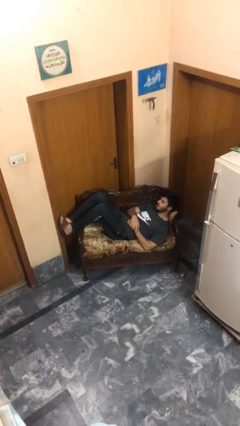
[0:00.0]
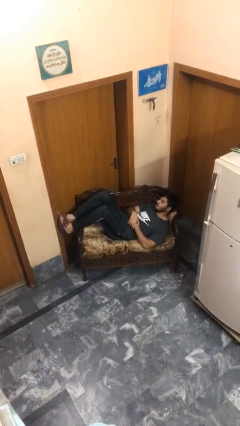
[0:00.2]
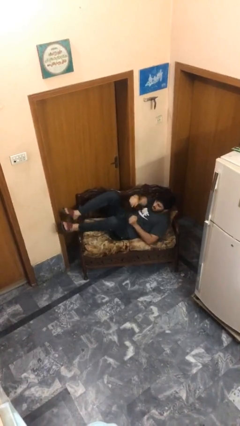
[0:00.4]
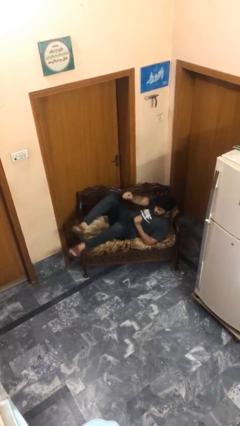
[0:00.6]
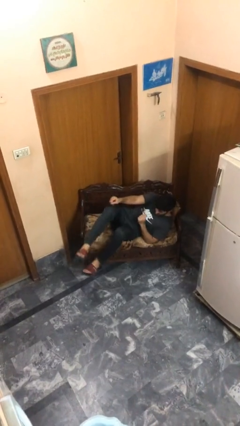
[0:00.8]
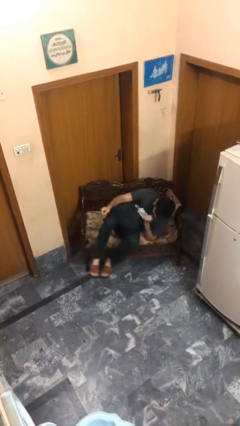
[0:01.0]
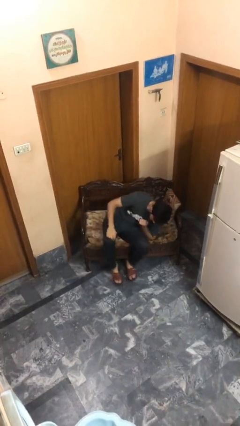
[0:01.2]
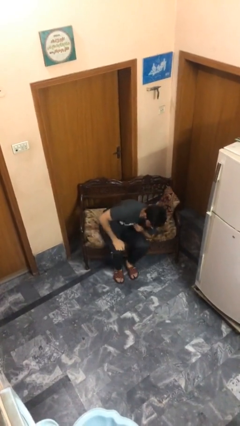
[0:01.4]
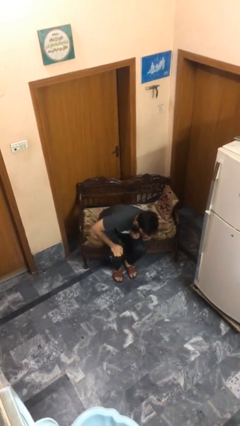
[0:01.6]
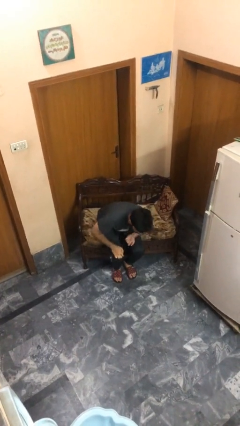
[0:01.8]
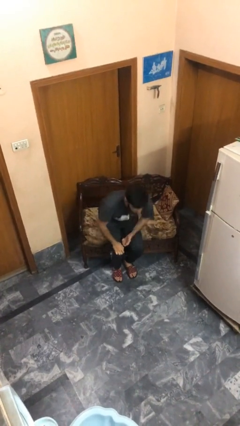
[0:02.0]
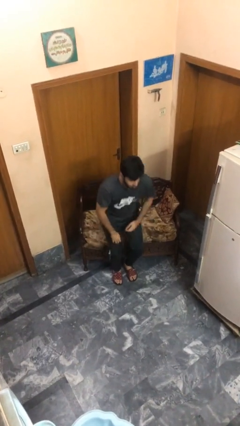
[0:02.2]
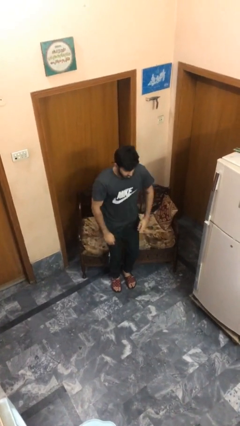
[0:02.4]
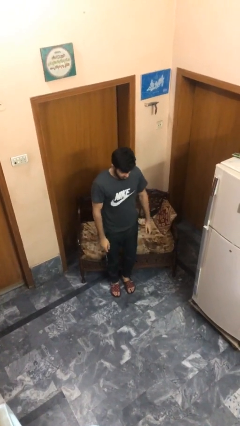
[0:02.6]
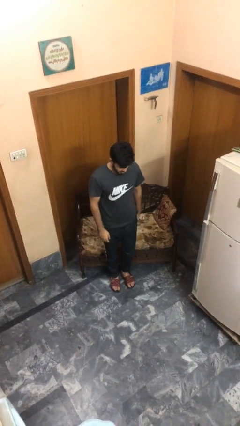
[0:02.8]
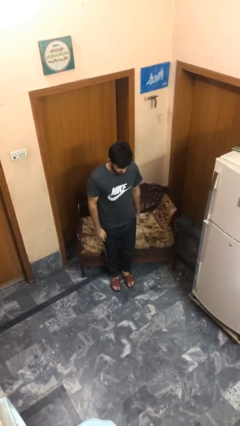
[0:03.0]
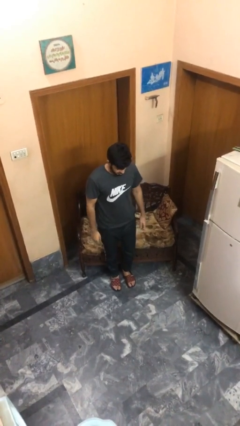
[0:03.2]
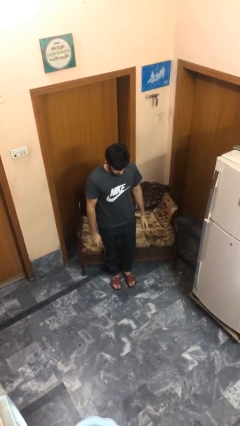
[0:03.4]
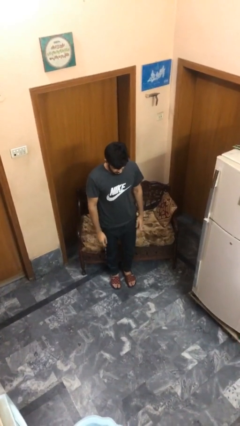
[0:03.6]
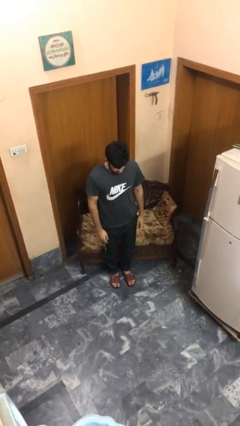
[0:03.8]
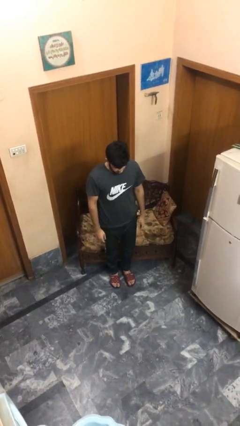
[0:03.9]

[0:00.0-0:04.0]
person stands up

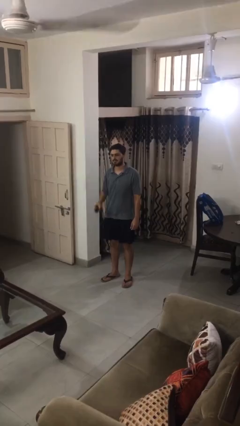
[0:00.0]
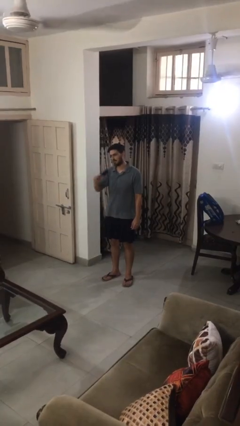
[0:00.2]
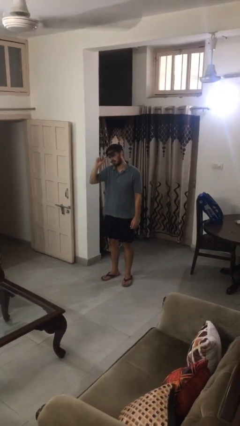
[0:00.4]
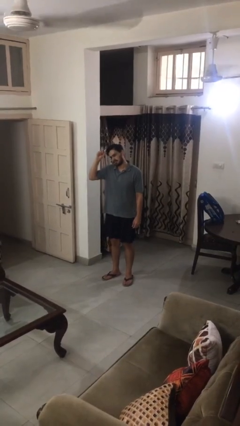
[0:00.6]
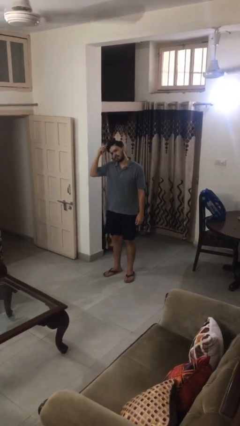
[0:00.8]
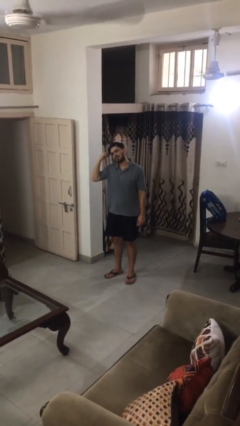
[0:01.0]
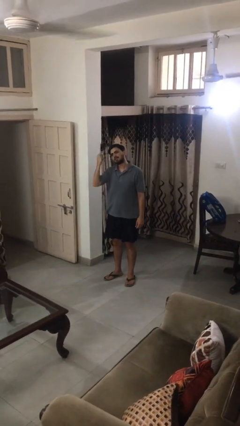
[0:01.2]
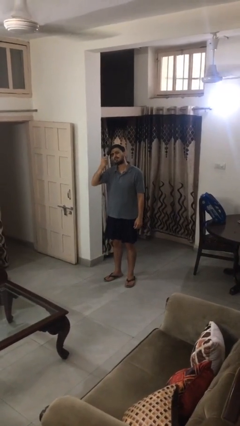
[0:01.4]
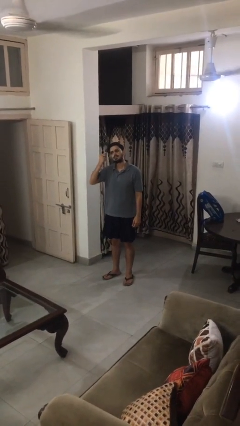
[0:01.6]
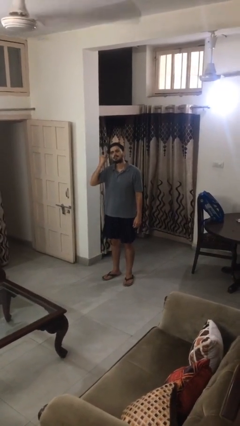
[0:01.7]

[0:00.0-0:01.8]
person brushes hair

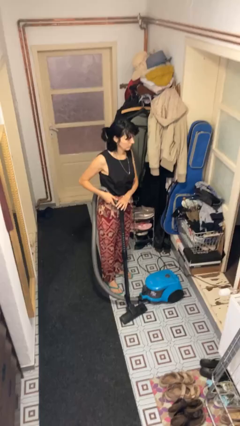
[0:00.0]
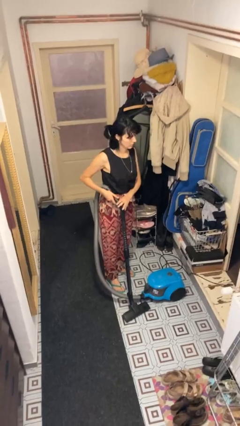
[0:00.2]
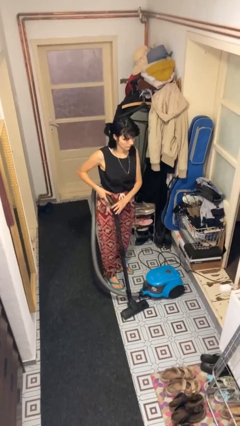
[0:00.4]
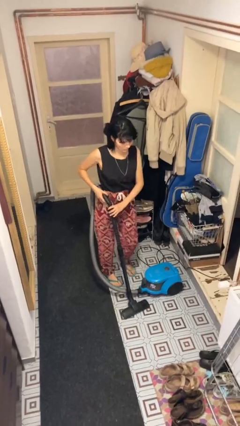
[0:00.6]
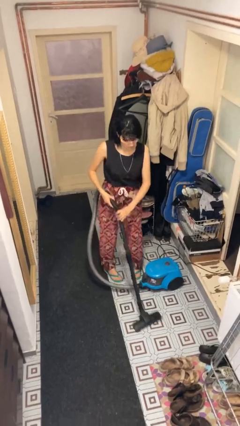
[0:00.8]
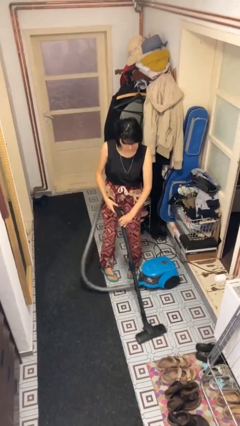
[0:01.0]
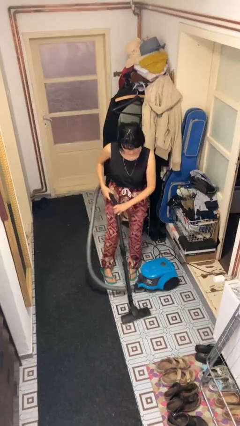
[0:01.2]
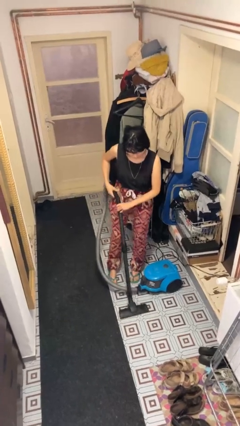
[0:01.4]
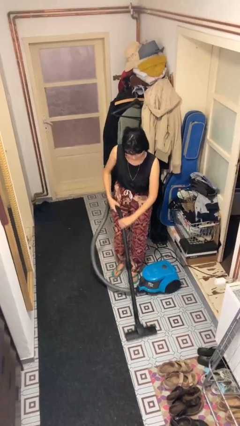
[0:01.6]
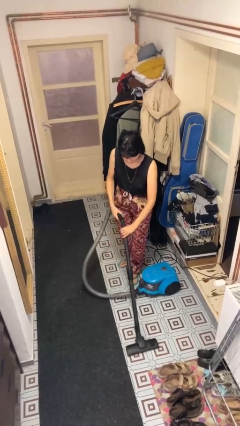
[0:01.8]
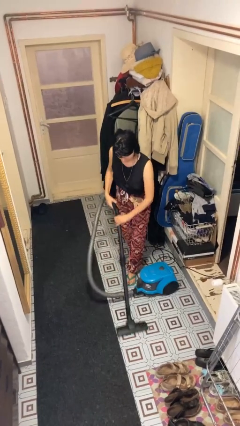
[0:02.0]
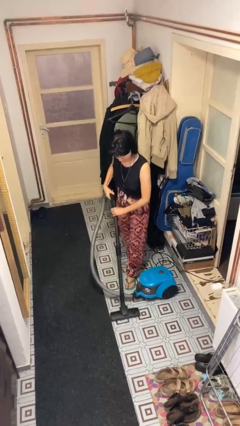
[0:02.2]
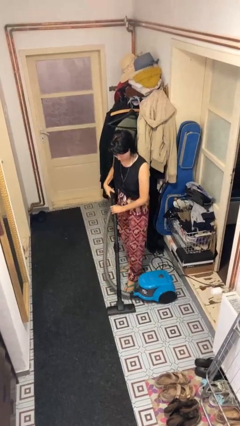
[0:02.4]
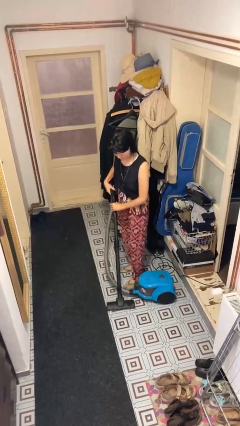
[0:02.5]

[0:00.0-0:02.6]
person vacuums carpet

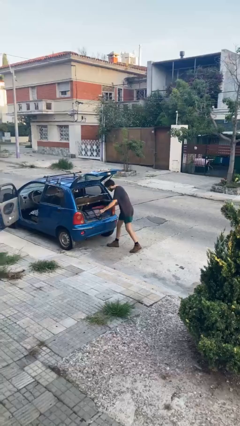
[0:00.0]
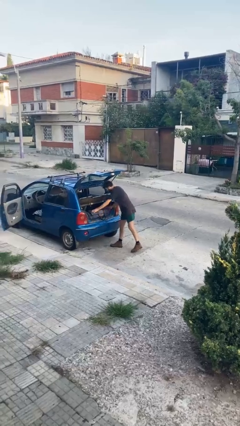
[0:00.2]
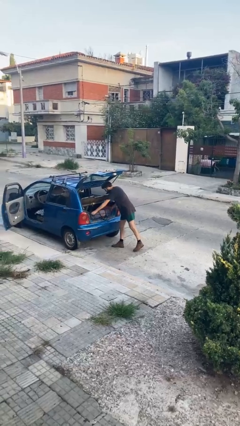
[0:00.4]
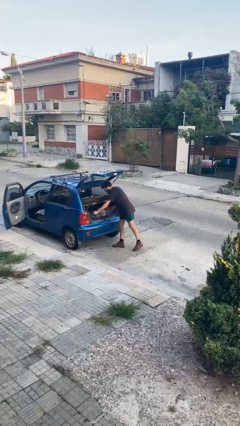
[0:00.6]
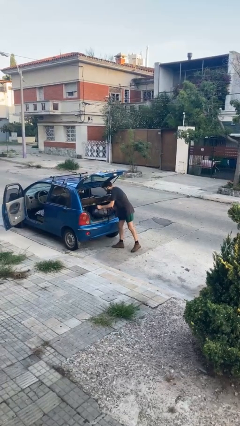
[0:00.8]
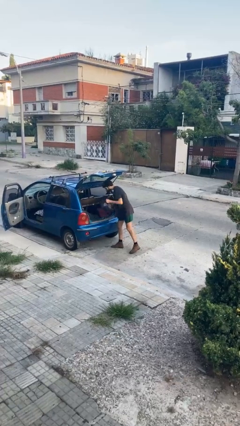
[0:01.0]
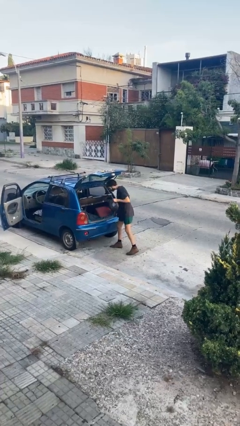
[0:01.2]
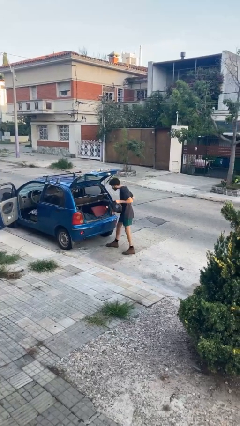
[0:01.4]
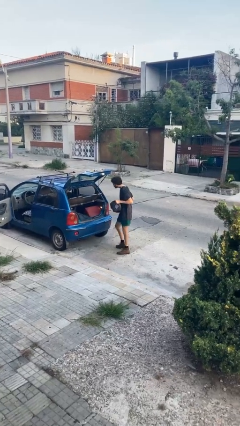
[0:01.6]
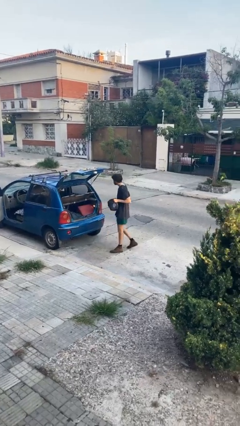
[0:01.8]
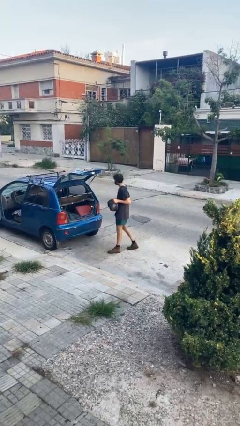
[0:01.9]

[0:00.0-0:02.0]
person unloads car

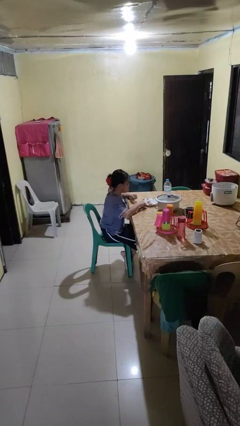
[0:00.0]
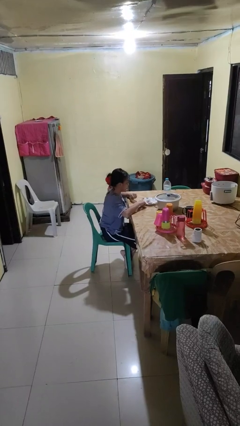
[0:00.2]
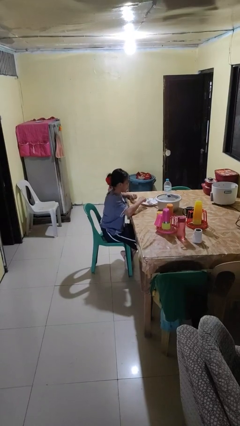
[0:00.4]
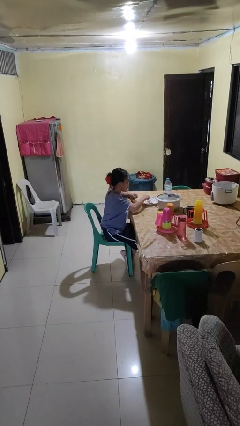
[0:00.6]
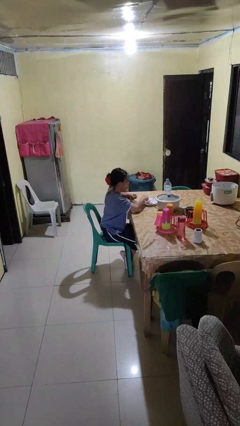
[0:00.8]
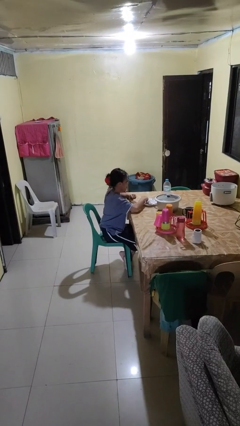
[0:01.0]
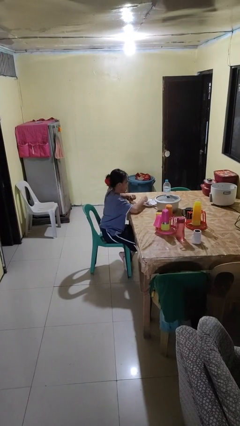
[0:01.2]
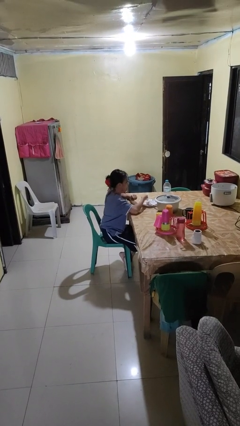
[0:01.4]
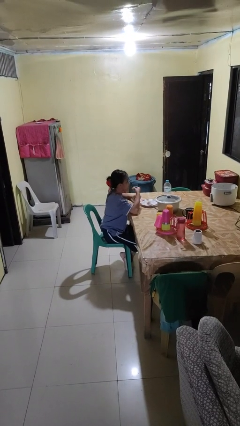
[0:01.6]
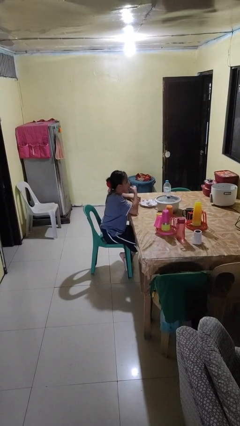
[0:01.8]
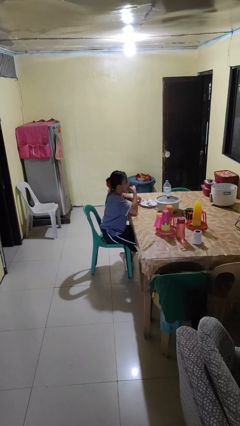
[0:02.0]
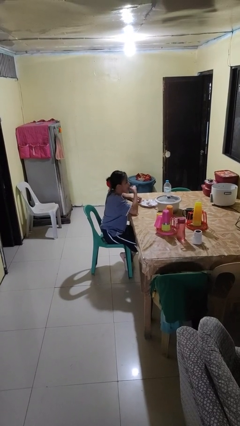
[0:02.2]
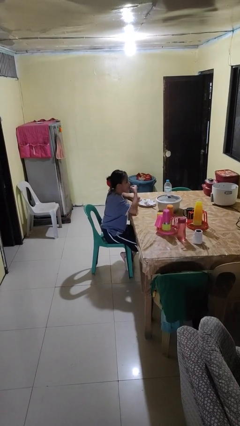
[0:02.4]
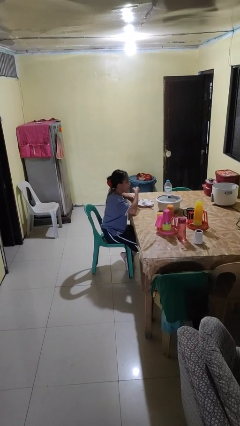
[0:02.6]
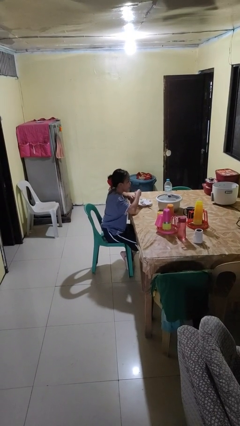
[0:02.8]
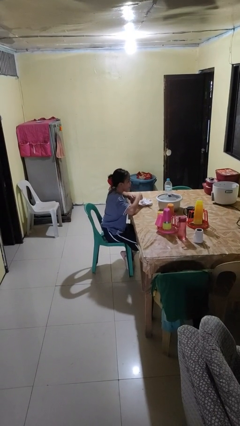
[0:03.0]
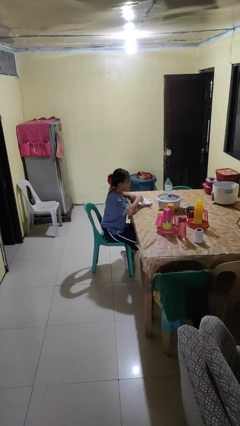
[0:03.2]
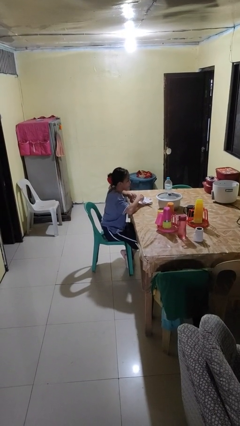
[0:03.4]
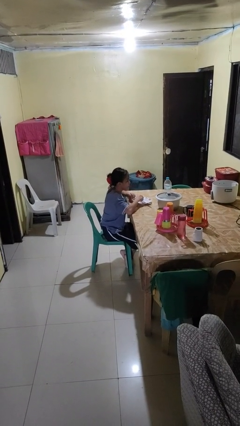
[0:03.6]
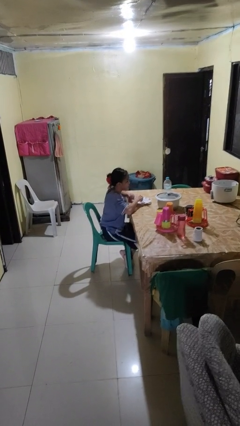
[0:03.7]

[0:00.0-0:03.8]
person eats with hands

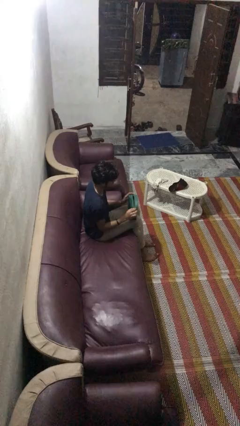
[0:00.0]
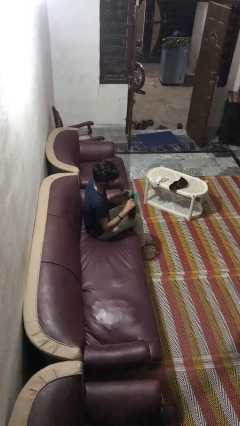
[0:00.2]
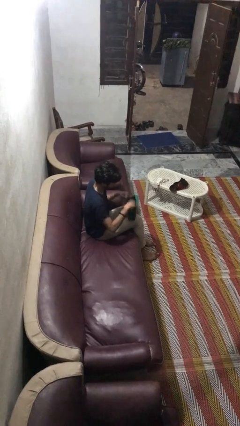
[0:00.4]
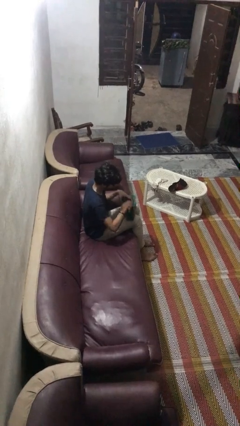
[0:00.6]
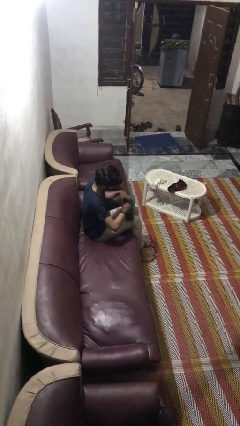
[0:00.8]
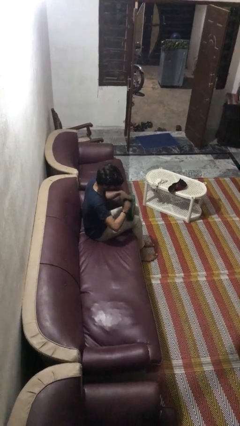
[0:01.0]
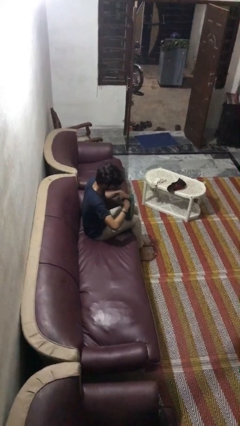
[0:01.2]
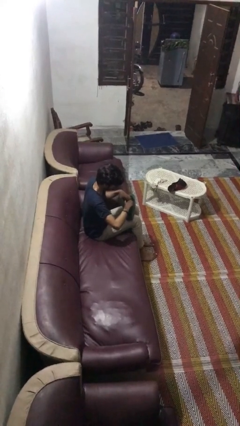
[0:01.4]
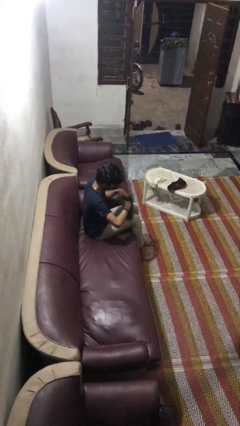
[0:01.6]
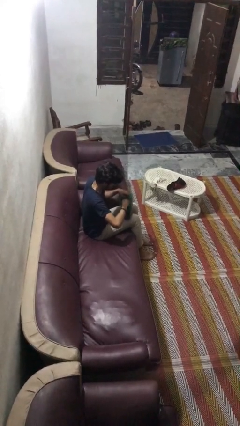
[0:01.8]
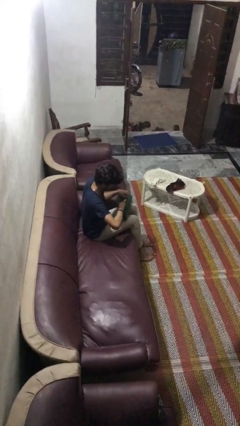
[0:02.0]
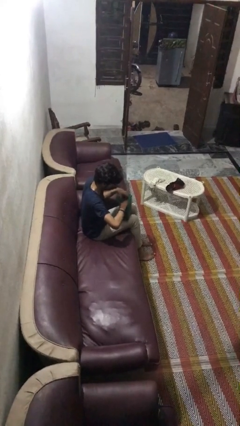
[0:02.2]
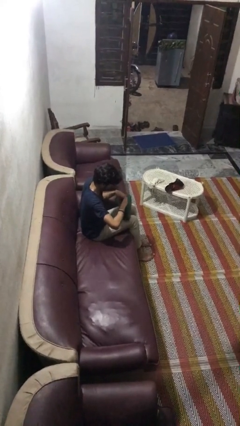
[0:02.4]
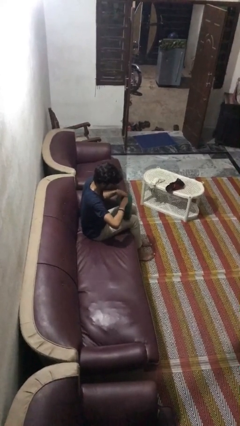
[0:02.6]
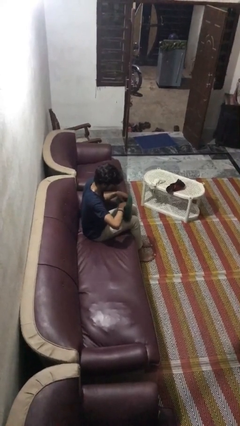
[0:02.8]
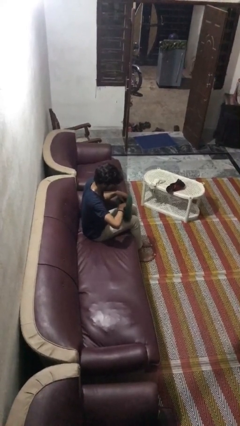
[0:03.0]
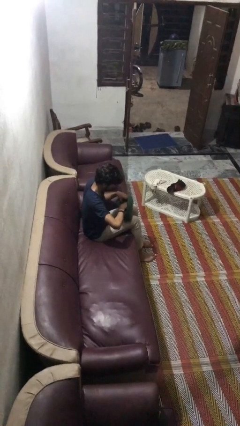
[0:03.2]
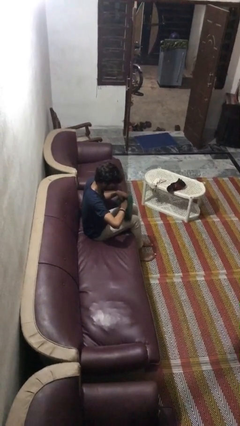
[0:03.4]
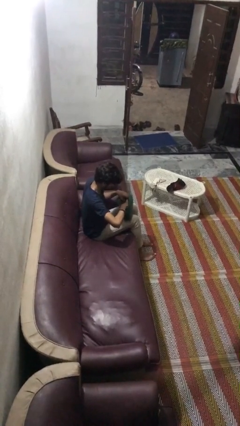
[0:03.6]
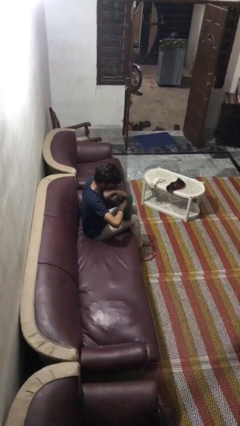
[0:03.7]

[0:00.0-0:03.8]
person searches in purse
